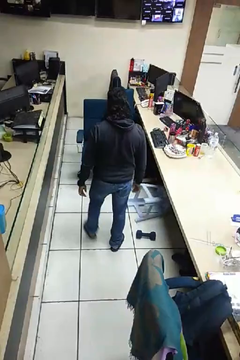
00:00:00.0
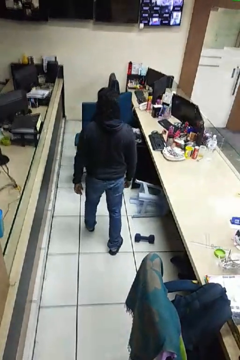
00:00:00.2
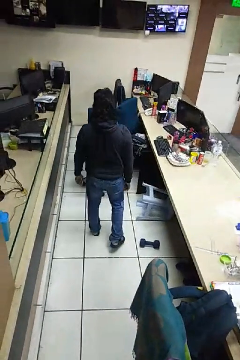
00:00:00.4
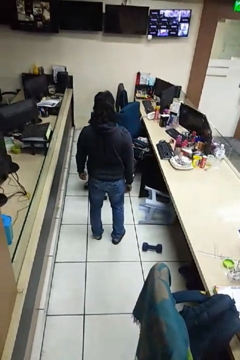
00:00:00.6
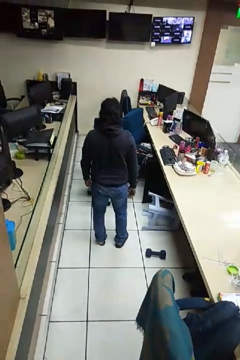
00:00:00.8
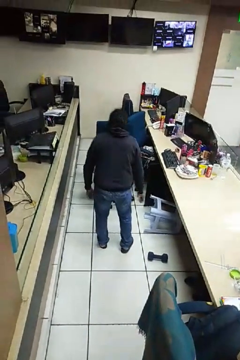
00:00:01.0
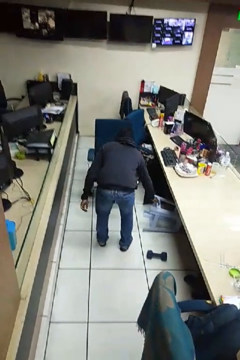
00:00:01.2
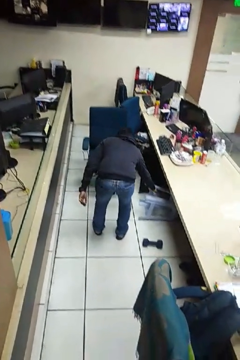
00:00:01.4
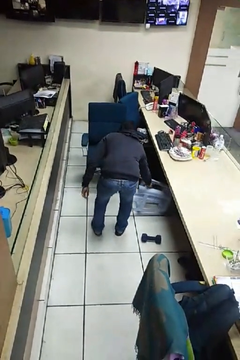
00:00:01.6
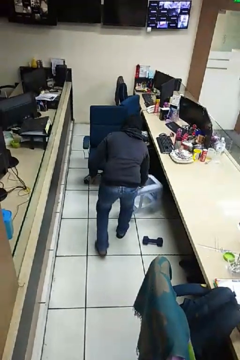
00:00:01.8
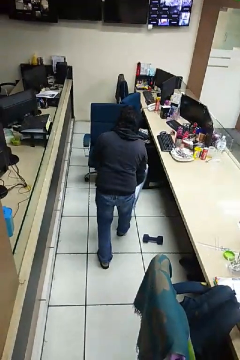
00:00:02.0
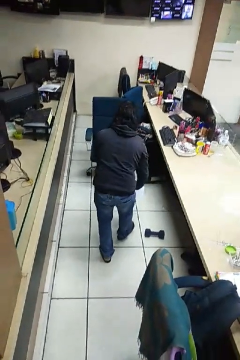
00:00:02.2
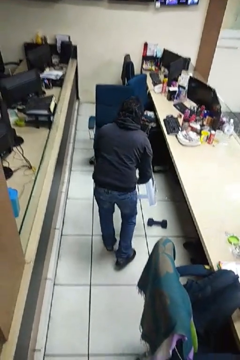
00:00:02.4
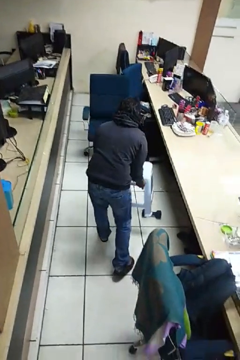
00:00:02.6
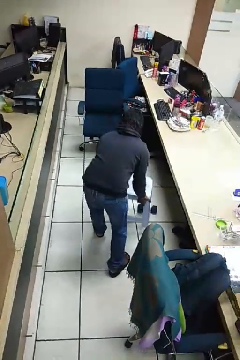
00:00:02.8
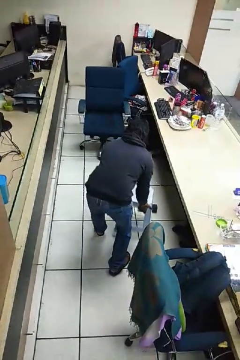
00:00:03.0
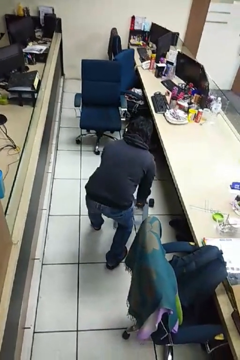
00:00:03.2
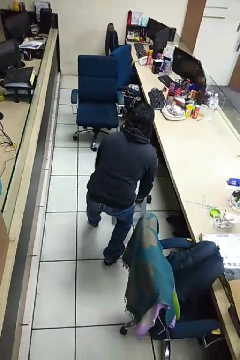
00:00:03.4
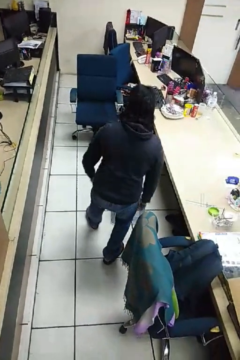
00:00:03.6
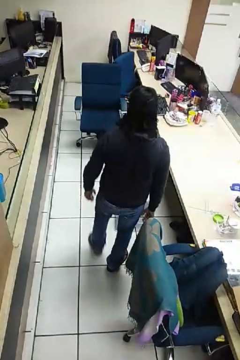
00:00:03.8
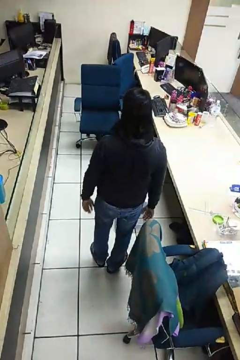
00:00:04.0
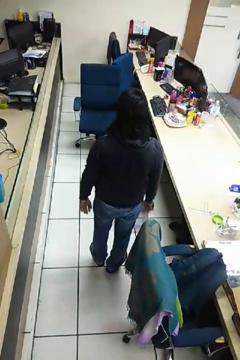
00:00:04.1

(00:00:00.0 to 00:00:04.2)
person sets upright furniture

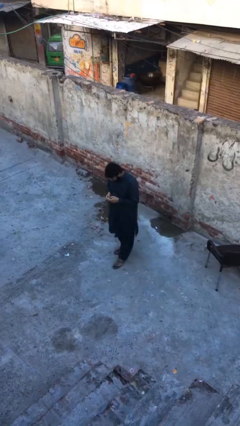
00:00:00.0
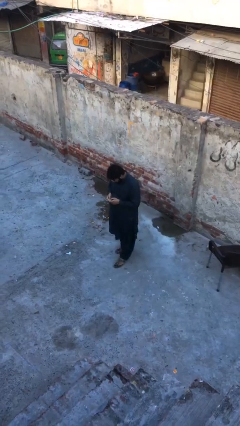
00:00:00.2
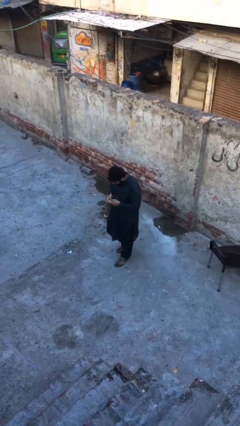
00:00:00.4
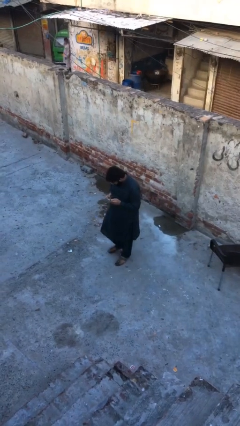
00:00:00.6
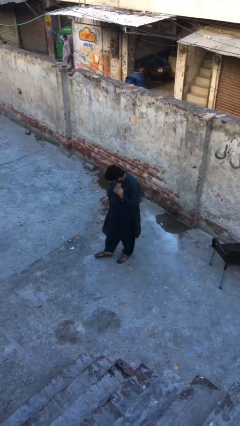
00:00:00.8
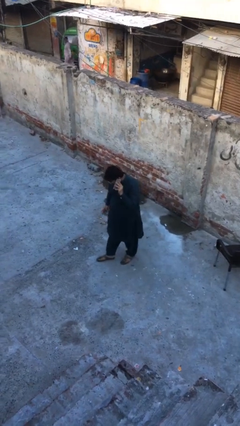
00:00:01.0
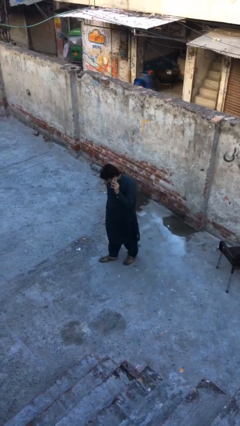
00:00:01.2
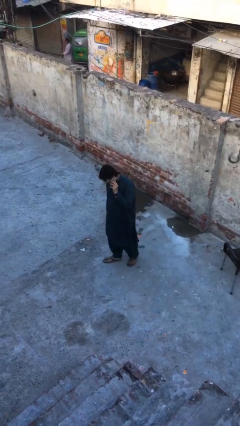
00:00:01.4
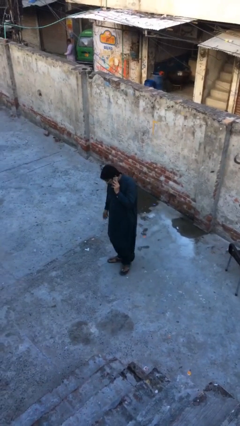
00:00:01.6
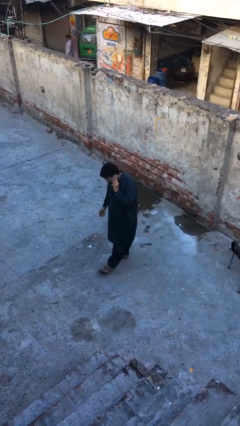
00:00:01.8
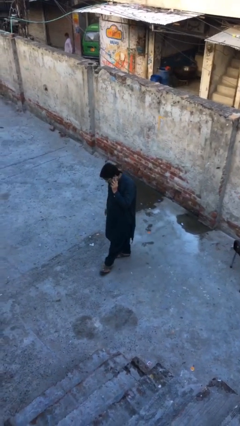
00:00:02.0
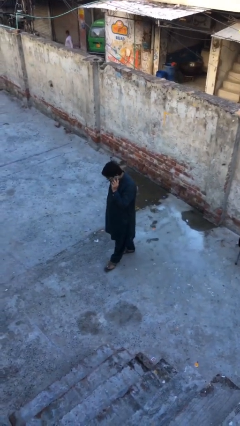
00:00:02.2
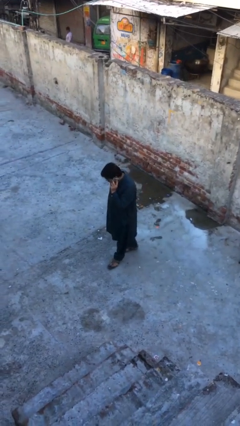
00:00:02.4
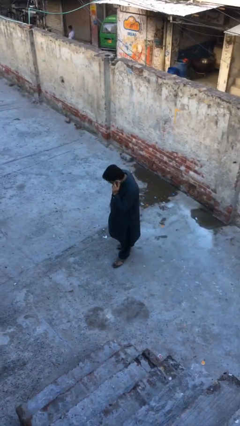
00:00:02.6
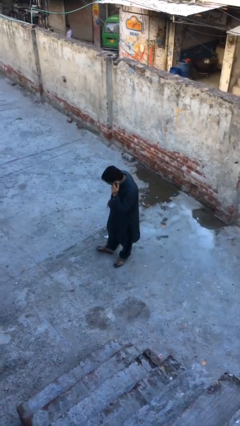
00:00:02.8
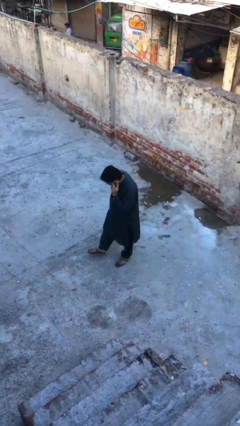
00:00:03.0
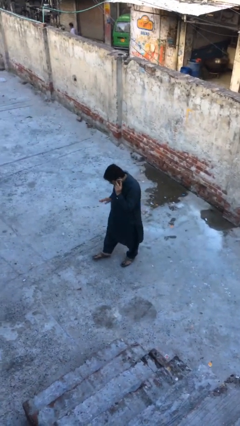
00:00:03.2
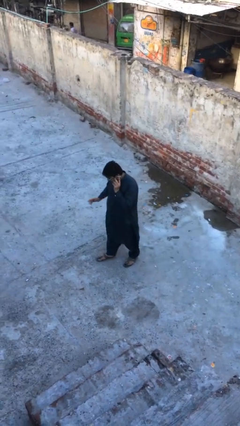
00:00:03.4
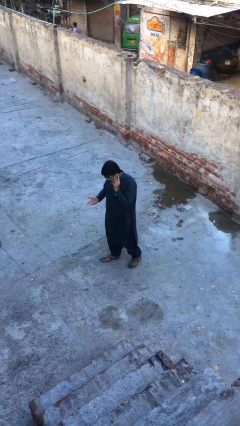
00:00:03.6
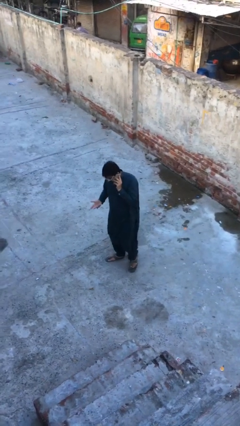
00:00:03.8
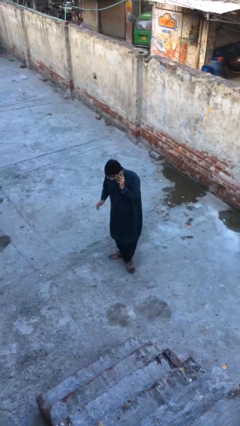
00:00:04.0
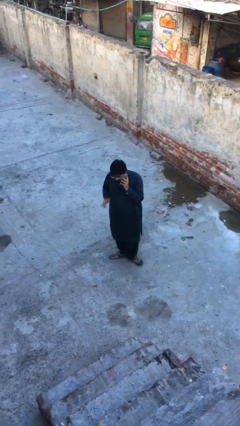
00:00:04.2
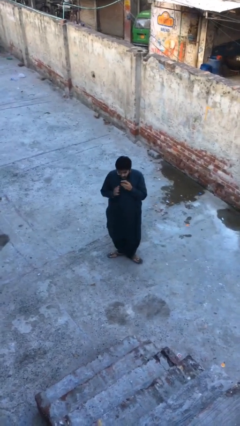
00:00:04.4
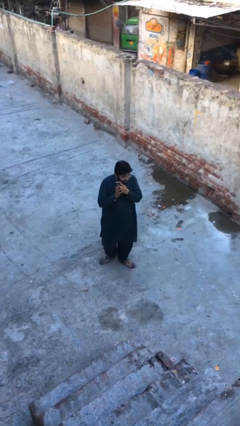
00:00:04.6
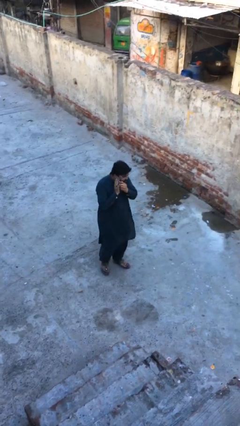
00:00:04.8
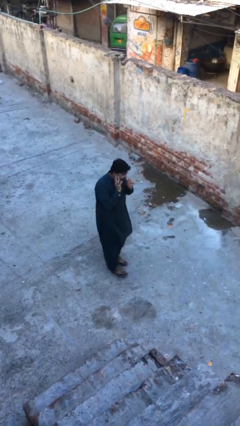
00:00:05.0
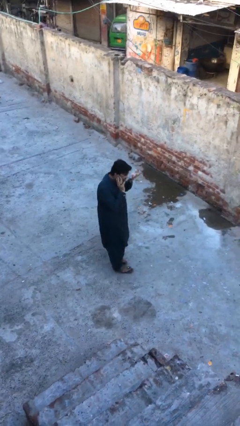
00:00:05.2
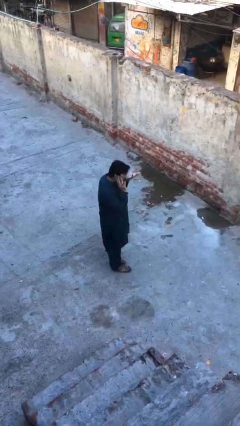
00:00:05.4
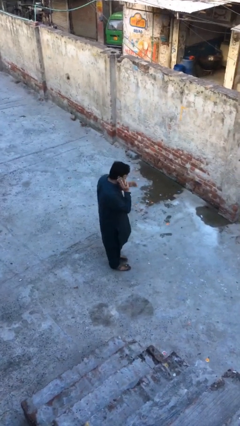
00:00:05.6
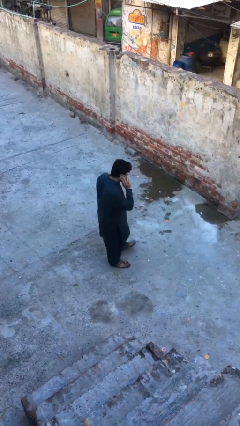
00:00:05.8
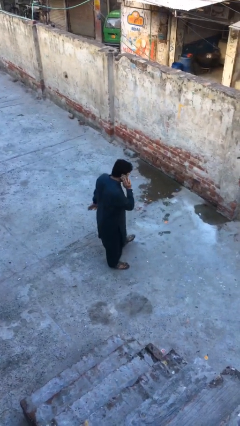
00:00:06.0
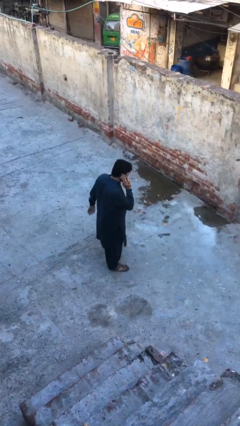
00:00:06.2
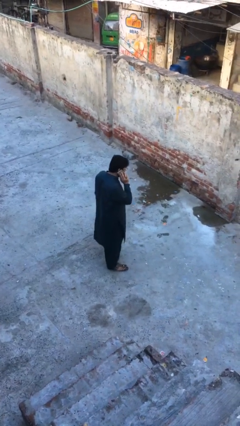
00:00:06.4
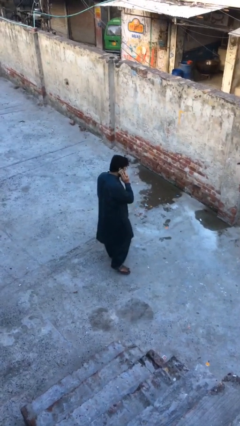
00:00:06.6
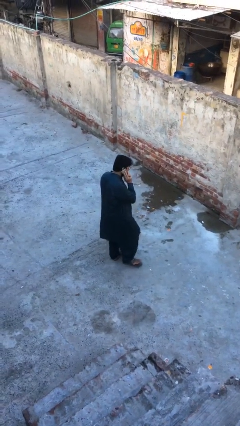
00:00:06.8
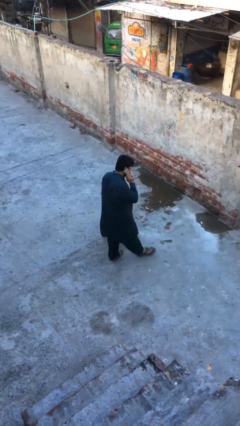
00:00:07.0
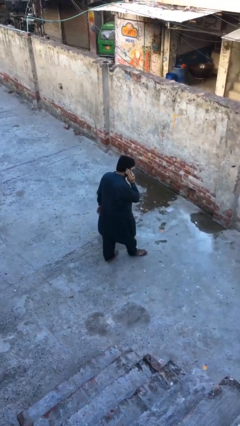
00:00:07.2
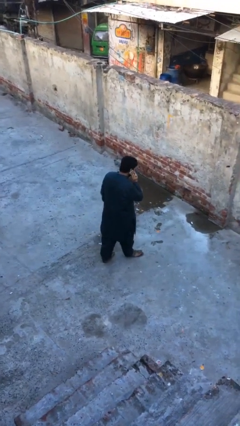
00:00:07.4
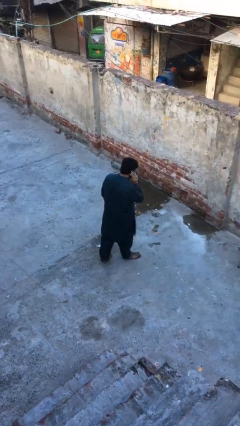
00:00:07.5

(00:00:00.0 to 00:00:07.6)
person talks on phone

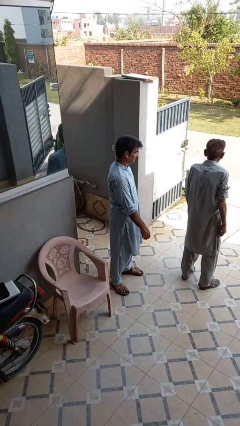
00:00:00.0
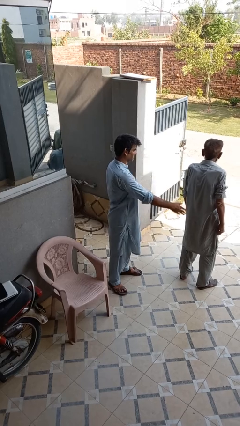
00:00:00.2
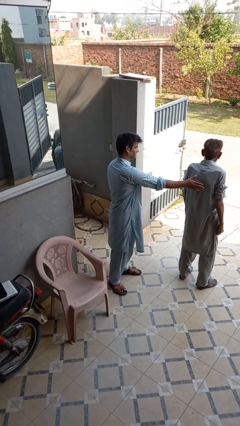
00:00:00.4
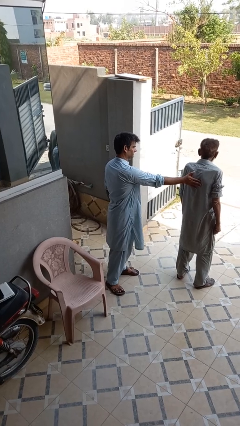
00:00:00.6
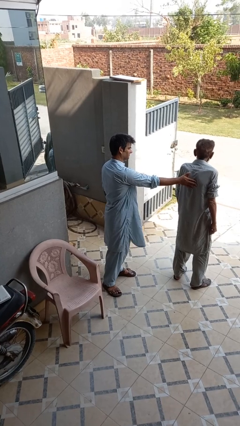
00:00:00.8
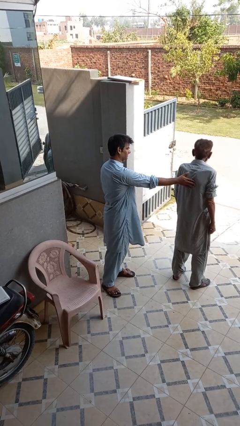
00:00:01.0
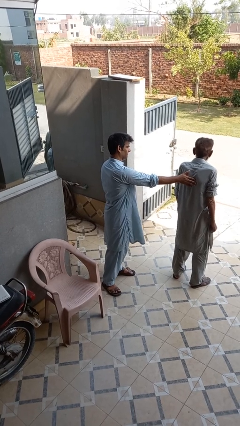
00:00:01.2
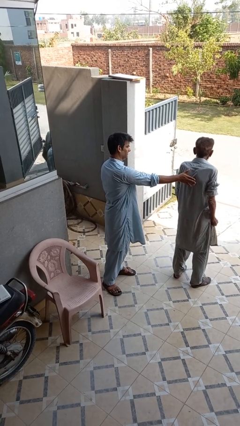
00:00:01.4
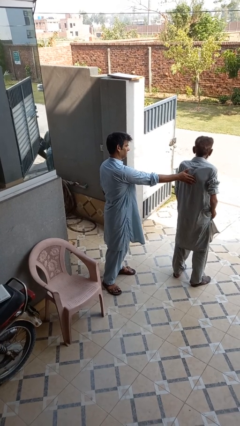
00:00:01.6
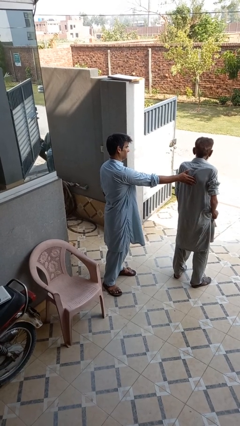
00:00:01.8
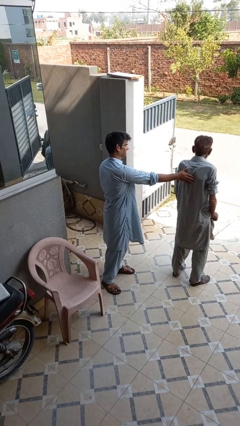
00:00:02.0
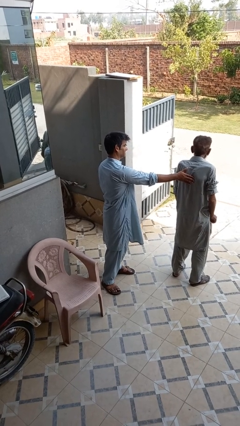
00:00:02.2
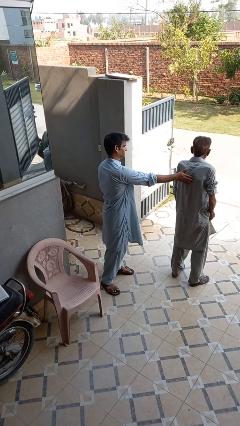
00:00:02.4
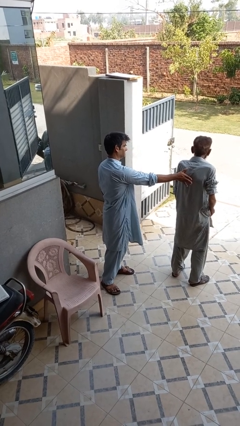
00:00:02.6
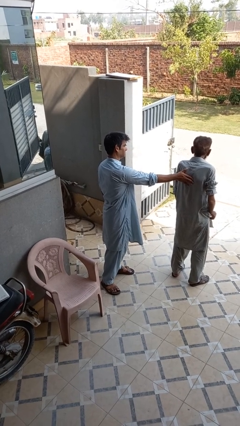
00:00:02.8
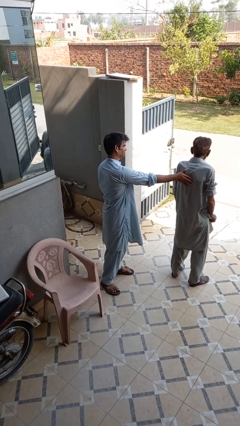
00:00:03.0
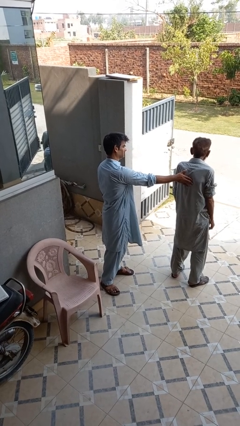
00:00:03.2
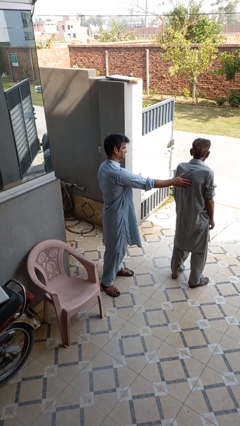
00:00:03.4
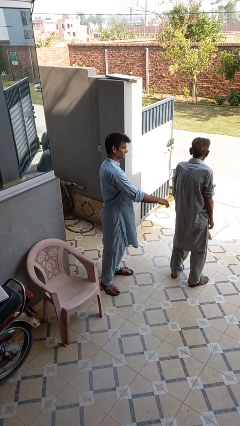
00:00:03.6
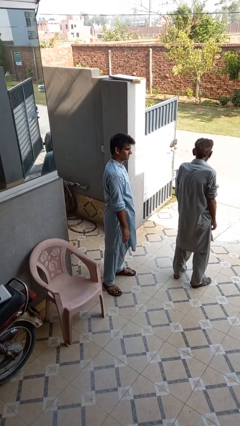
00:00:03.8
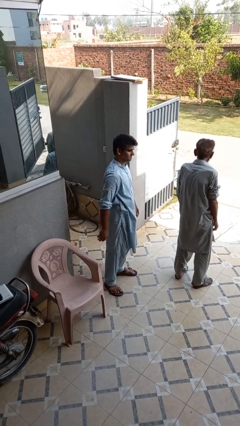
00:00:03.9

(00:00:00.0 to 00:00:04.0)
person touches back of person

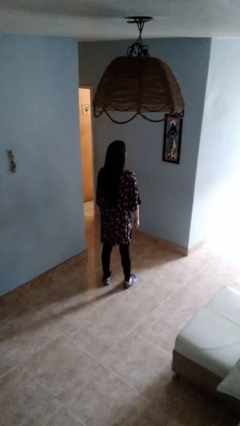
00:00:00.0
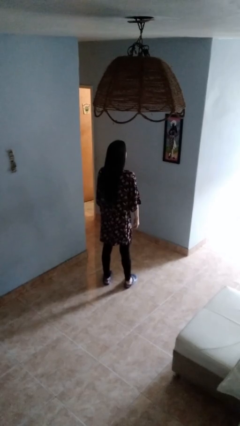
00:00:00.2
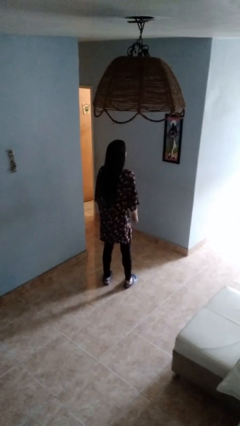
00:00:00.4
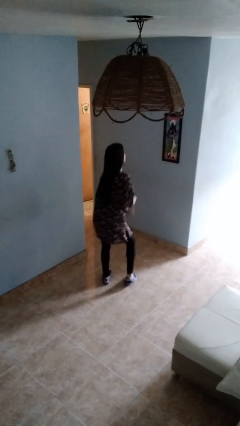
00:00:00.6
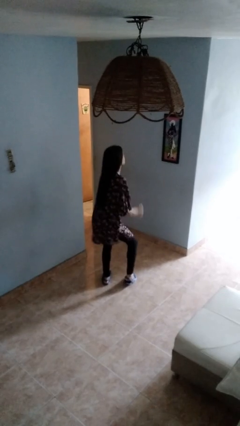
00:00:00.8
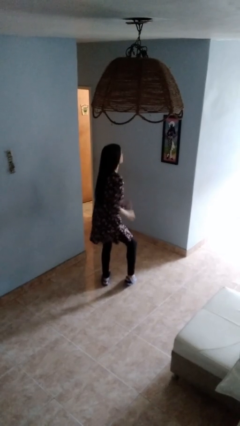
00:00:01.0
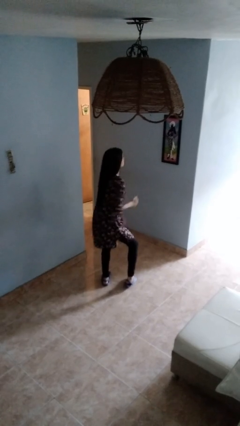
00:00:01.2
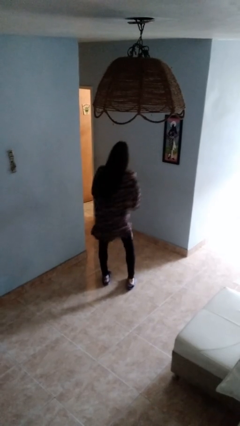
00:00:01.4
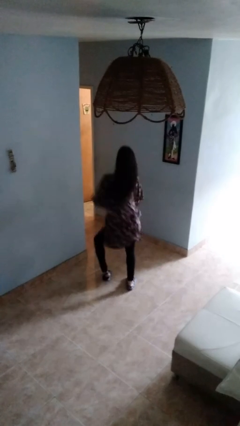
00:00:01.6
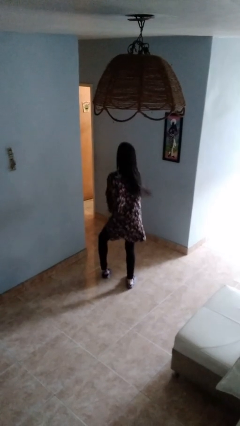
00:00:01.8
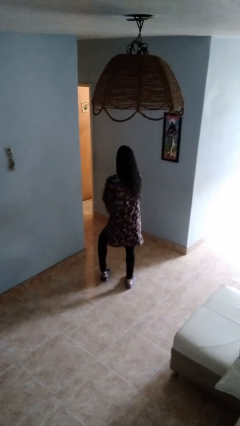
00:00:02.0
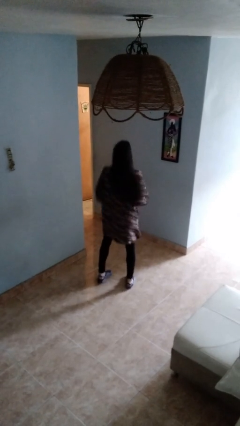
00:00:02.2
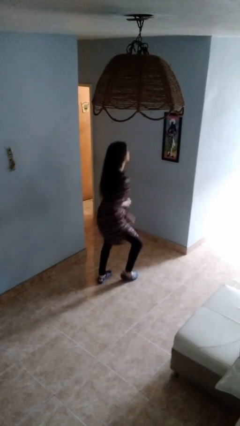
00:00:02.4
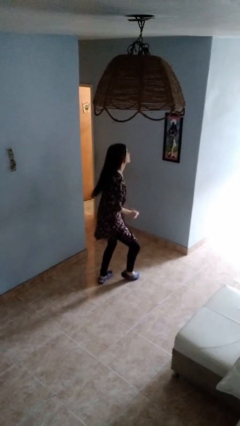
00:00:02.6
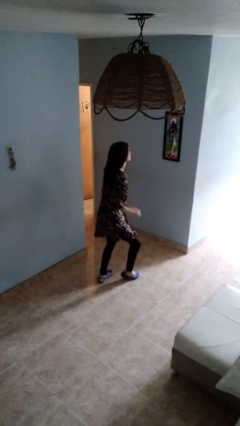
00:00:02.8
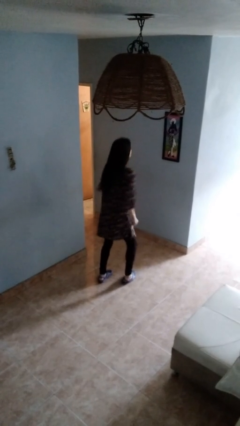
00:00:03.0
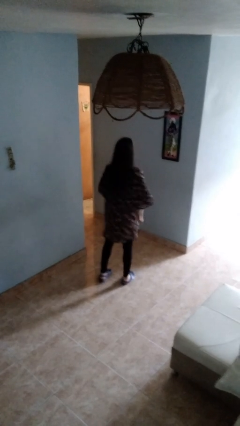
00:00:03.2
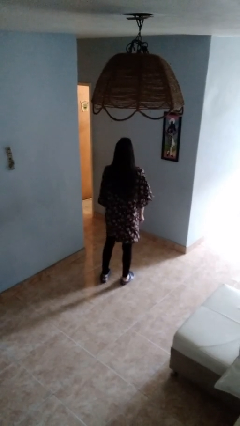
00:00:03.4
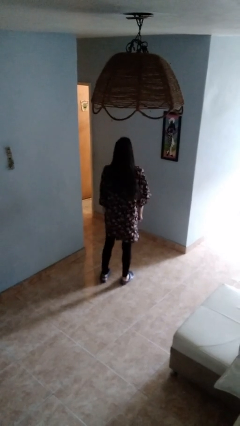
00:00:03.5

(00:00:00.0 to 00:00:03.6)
person dances in place
